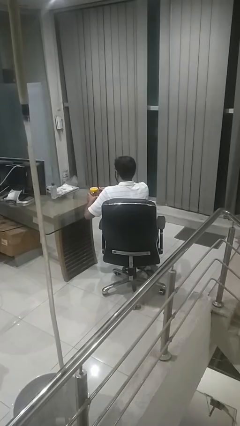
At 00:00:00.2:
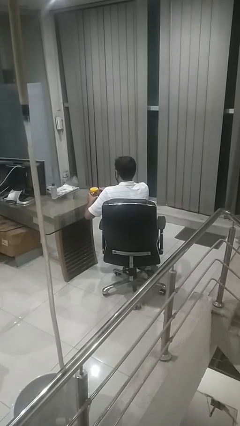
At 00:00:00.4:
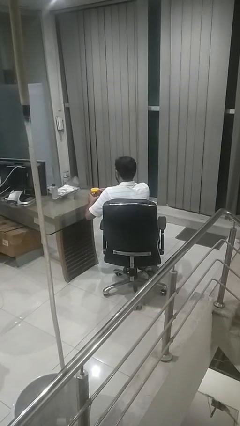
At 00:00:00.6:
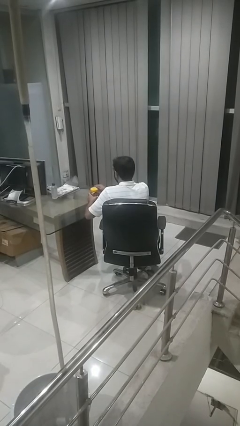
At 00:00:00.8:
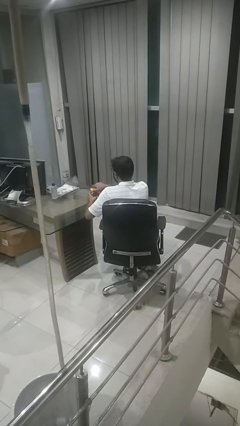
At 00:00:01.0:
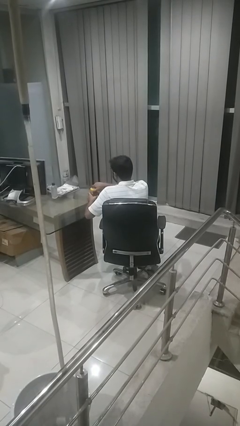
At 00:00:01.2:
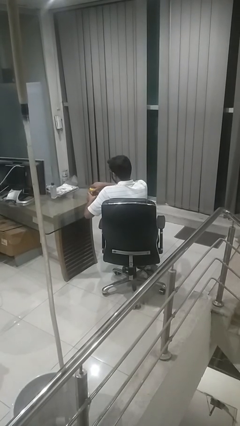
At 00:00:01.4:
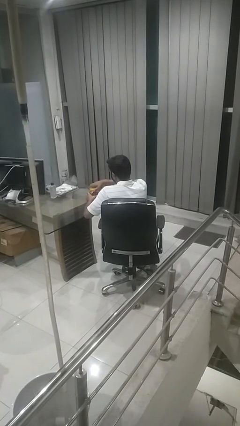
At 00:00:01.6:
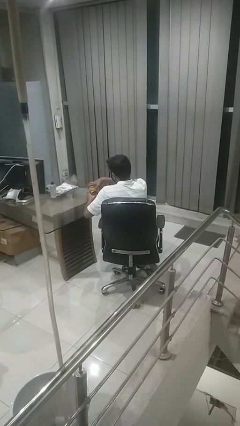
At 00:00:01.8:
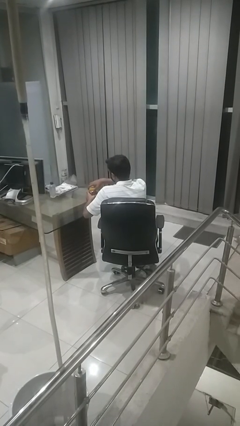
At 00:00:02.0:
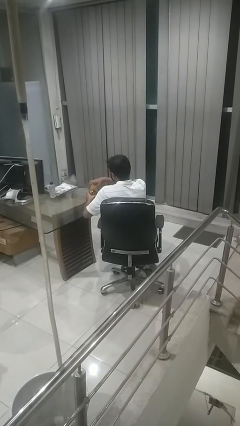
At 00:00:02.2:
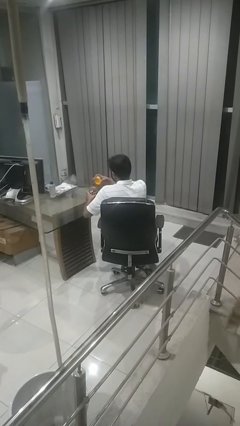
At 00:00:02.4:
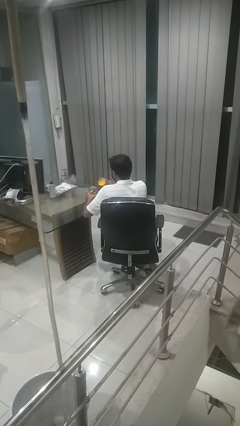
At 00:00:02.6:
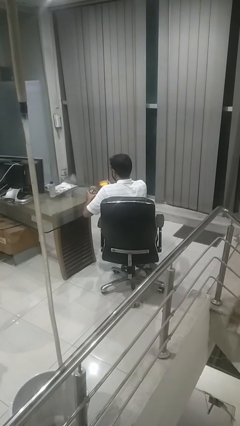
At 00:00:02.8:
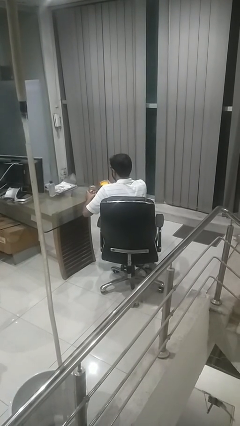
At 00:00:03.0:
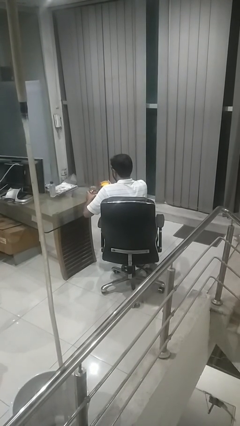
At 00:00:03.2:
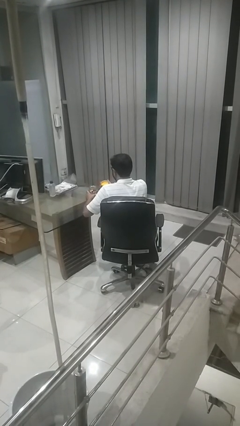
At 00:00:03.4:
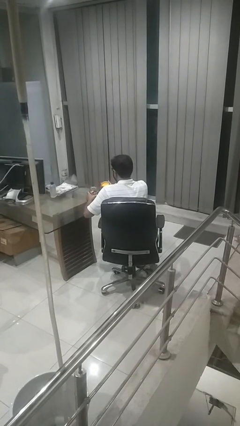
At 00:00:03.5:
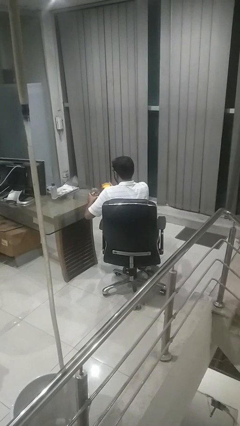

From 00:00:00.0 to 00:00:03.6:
person opens jar

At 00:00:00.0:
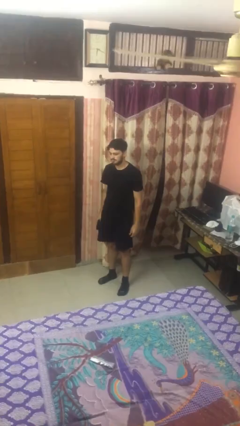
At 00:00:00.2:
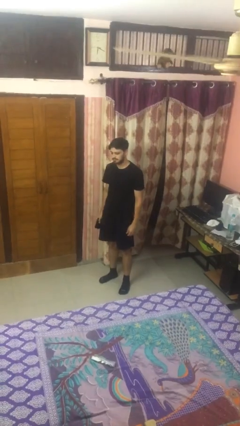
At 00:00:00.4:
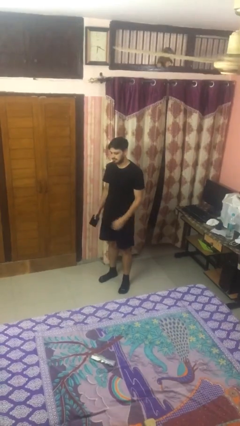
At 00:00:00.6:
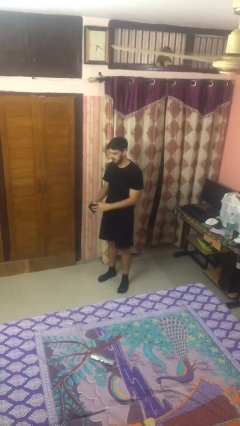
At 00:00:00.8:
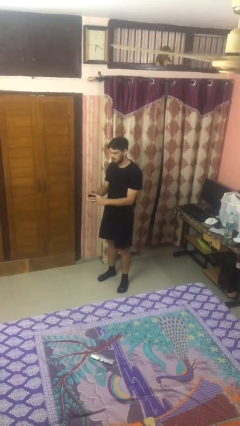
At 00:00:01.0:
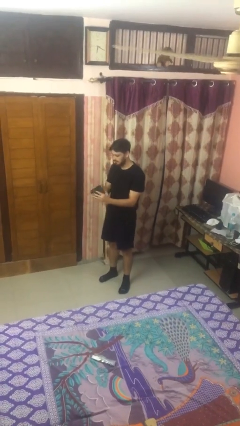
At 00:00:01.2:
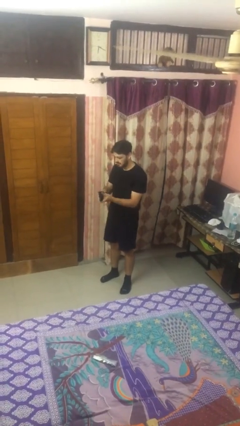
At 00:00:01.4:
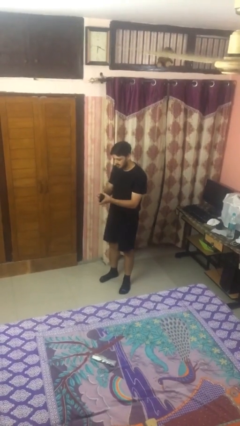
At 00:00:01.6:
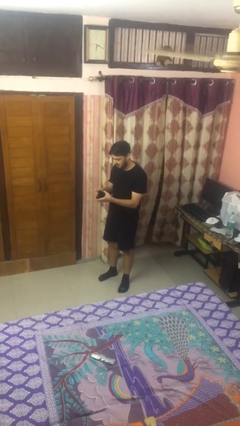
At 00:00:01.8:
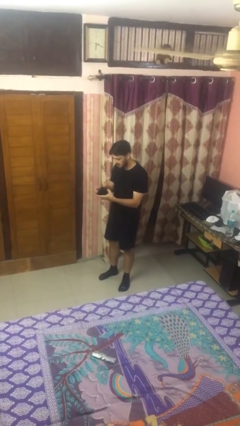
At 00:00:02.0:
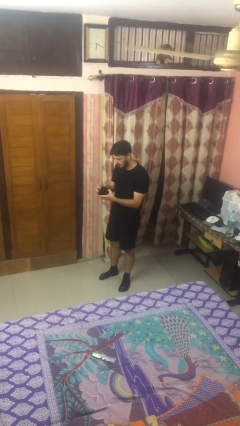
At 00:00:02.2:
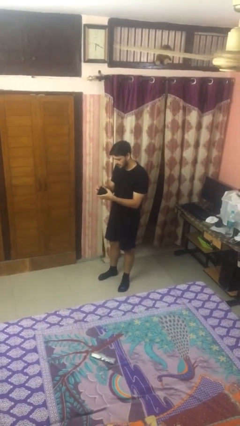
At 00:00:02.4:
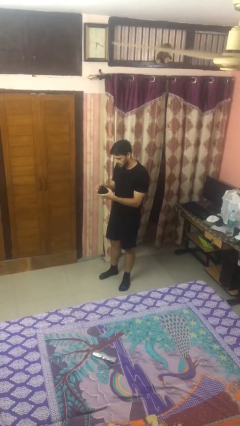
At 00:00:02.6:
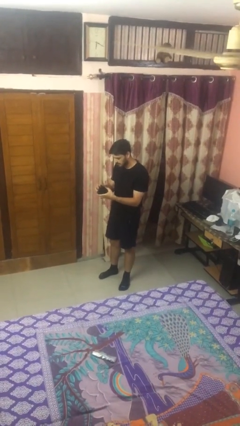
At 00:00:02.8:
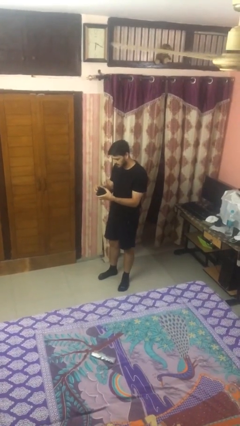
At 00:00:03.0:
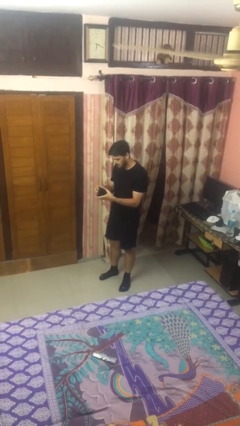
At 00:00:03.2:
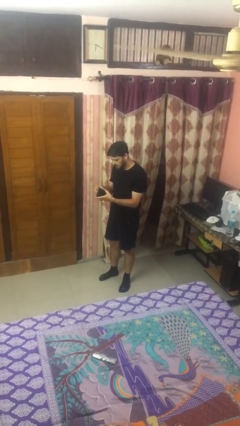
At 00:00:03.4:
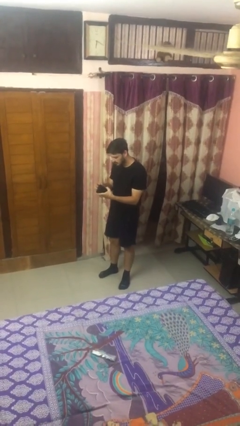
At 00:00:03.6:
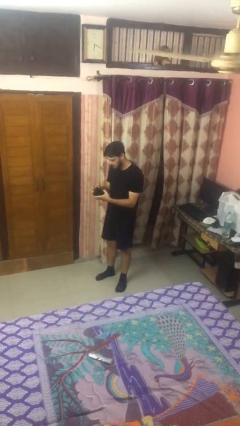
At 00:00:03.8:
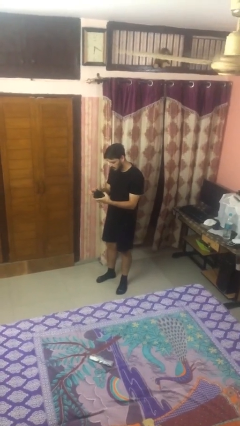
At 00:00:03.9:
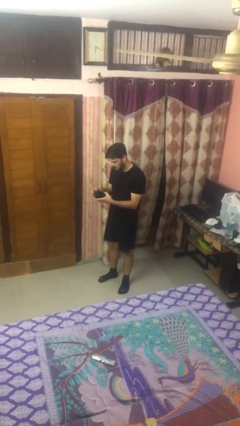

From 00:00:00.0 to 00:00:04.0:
person searches in purse

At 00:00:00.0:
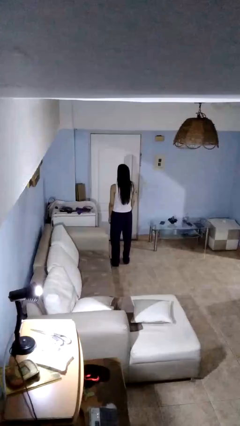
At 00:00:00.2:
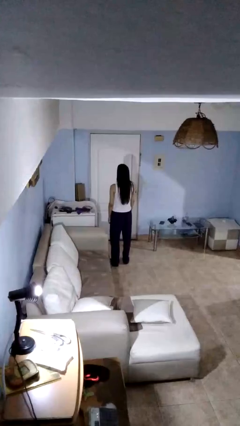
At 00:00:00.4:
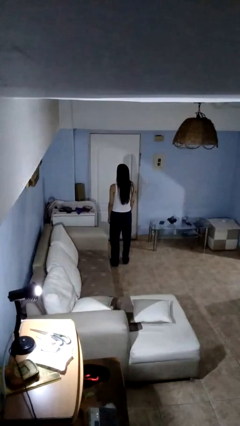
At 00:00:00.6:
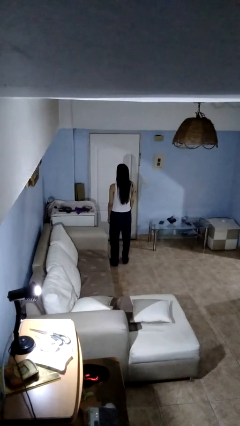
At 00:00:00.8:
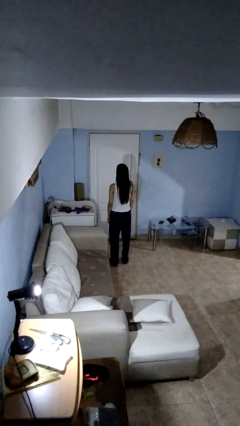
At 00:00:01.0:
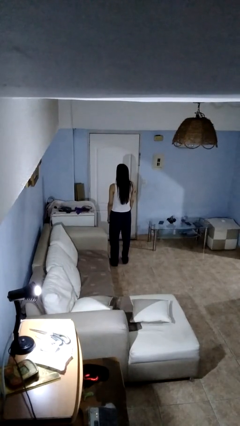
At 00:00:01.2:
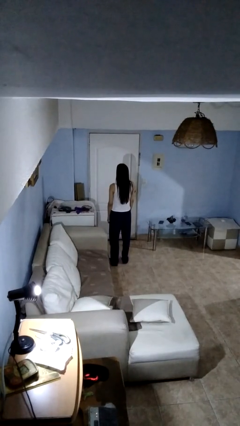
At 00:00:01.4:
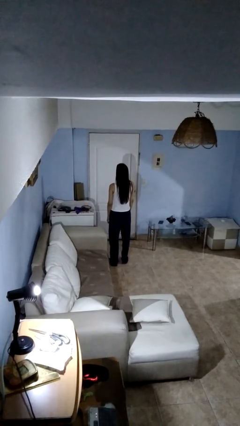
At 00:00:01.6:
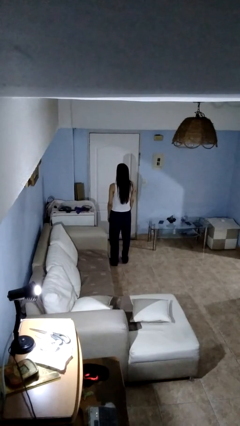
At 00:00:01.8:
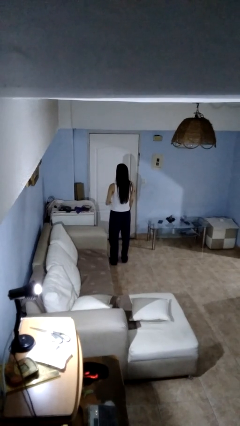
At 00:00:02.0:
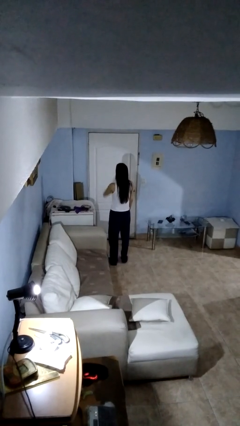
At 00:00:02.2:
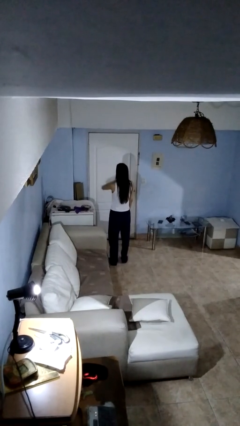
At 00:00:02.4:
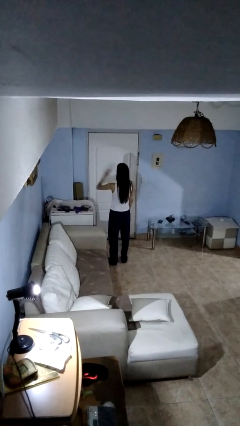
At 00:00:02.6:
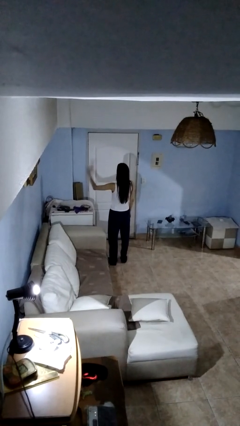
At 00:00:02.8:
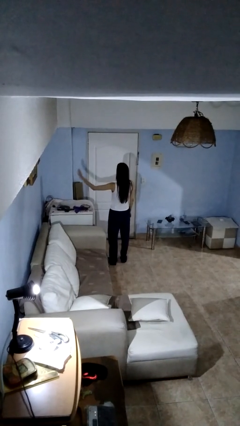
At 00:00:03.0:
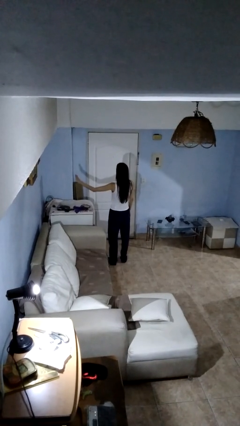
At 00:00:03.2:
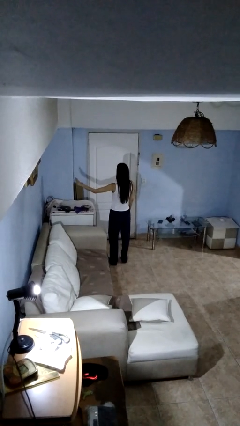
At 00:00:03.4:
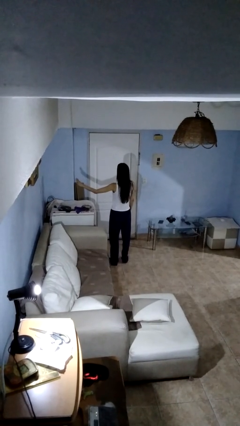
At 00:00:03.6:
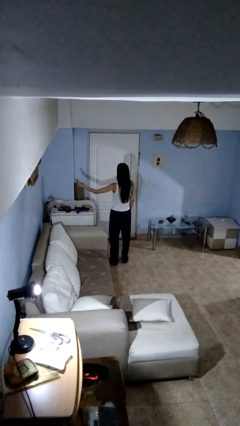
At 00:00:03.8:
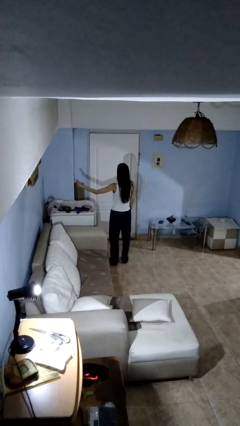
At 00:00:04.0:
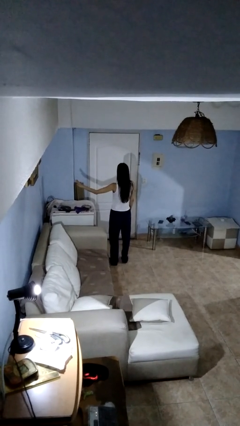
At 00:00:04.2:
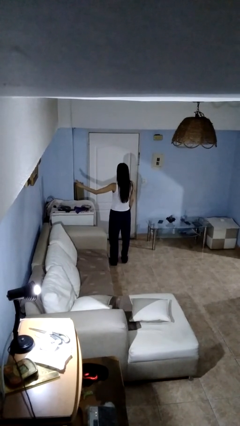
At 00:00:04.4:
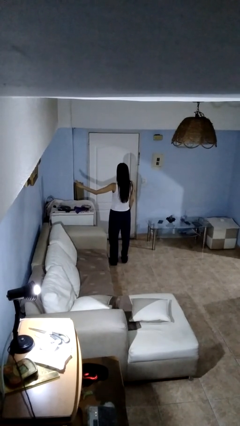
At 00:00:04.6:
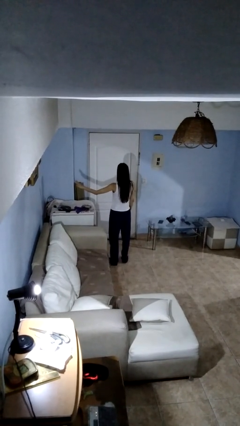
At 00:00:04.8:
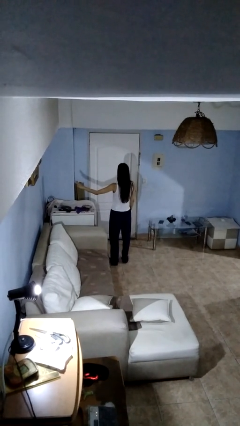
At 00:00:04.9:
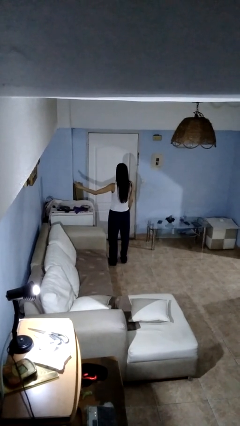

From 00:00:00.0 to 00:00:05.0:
person gestures swipe left

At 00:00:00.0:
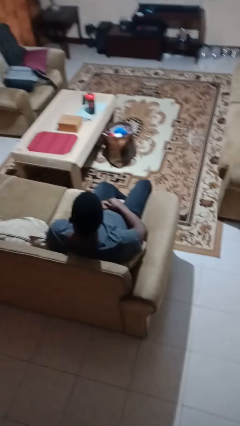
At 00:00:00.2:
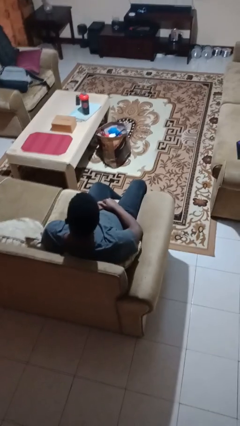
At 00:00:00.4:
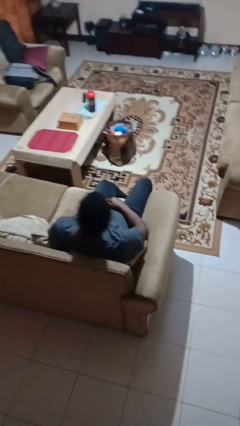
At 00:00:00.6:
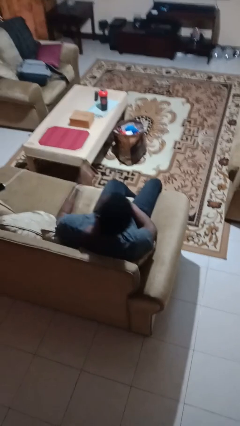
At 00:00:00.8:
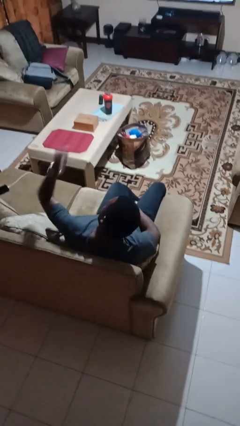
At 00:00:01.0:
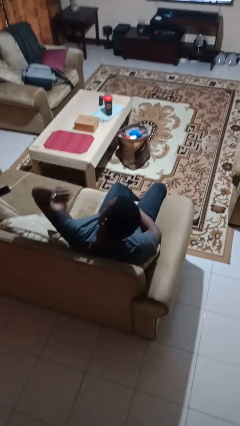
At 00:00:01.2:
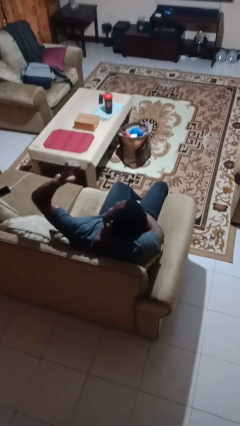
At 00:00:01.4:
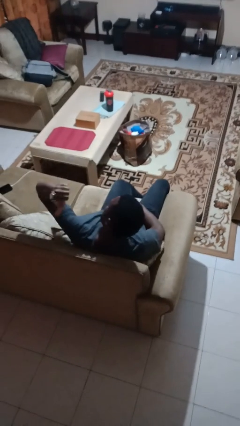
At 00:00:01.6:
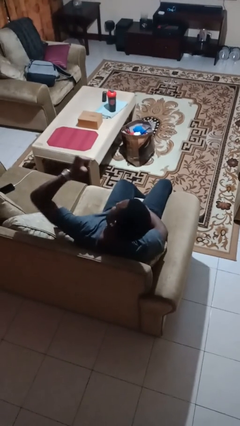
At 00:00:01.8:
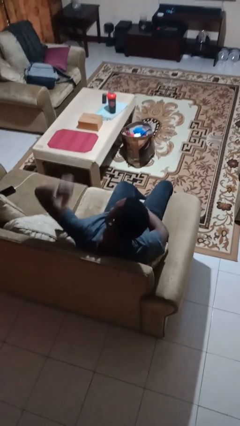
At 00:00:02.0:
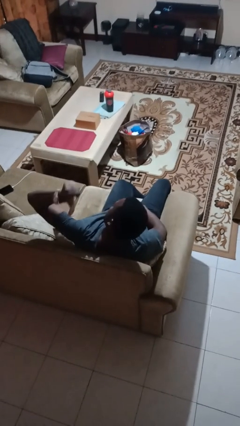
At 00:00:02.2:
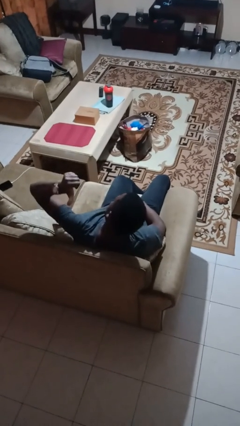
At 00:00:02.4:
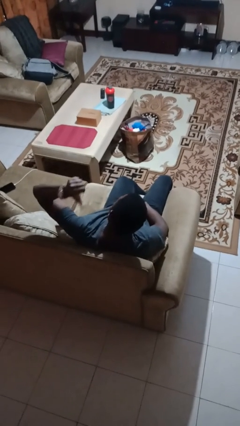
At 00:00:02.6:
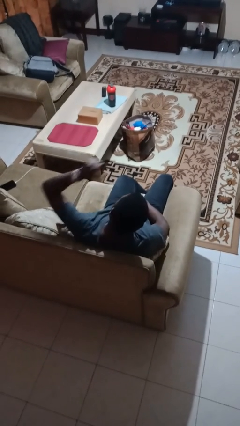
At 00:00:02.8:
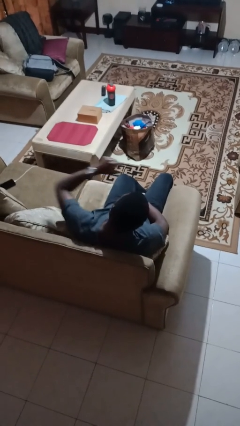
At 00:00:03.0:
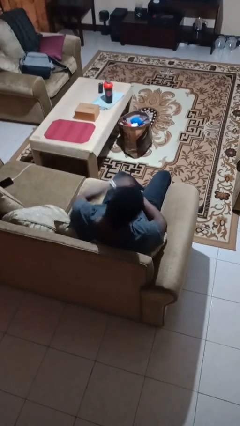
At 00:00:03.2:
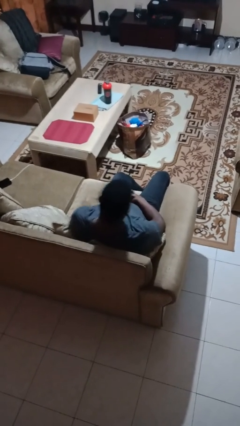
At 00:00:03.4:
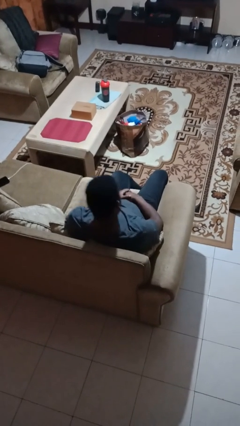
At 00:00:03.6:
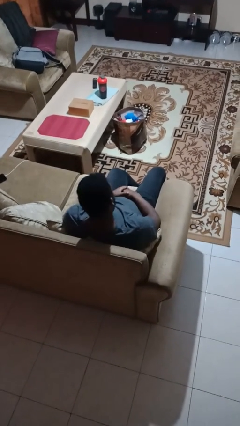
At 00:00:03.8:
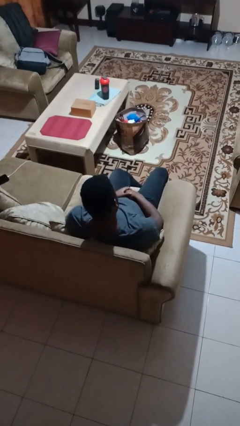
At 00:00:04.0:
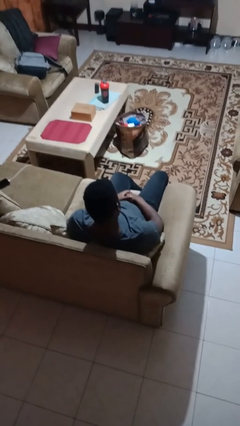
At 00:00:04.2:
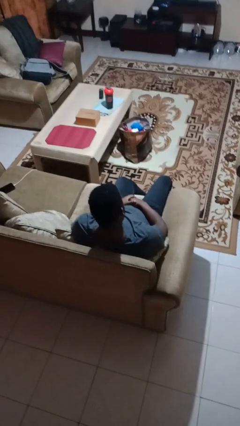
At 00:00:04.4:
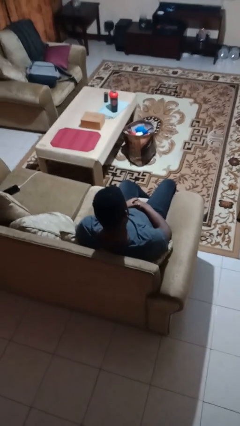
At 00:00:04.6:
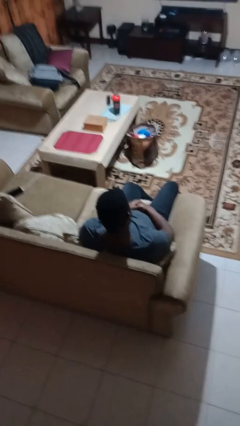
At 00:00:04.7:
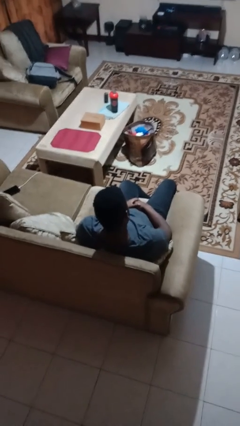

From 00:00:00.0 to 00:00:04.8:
person gestures behind me
